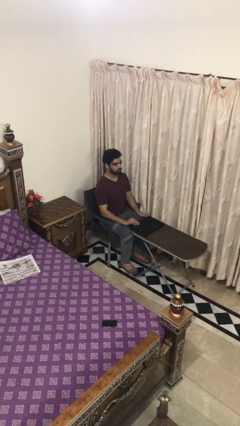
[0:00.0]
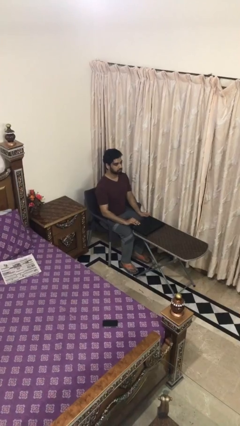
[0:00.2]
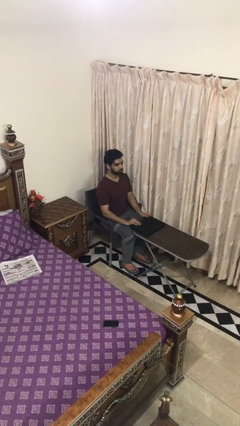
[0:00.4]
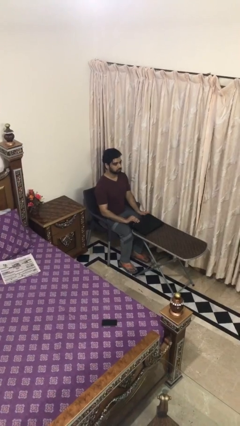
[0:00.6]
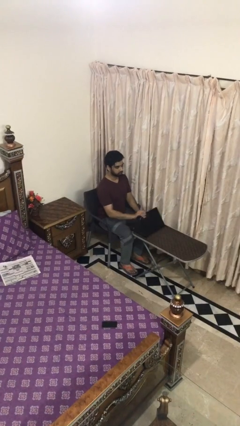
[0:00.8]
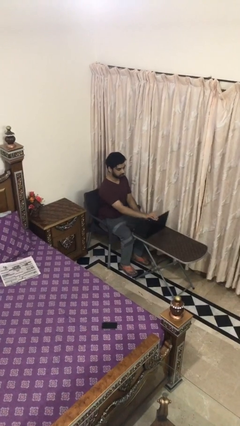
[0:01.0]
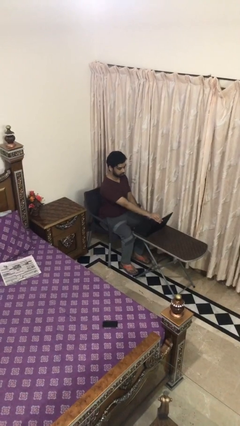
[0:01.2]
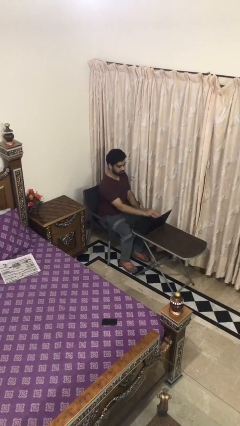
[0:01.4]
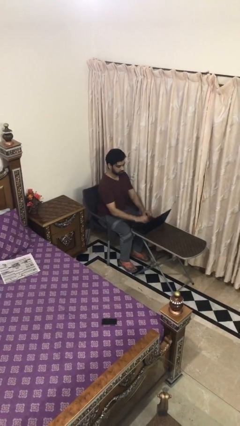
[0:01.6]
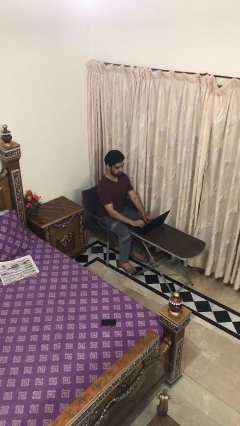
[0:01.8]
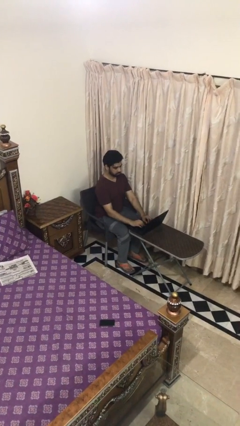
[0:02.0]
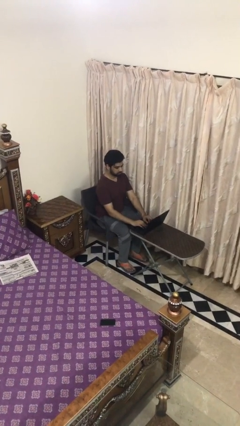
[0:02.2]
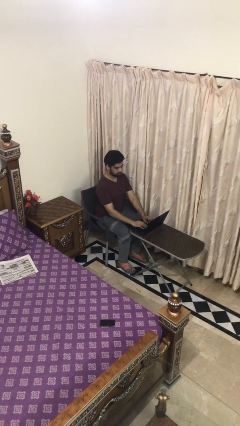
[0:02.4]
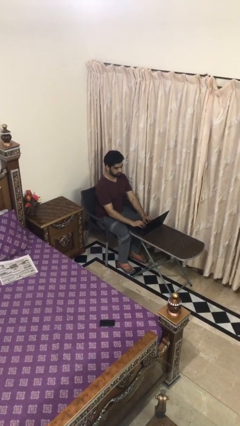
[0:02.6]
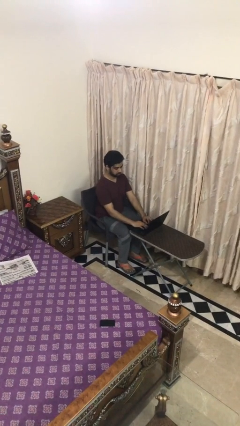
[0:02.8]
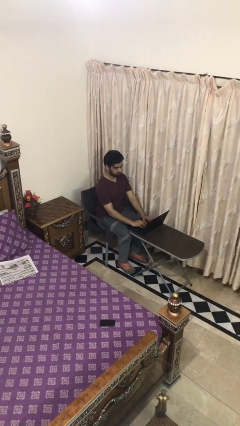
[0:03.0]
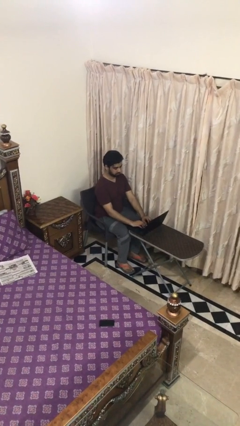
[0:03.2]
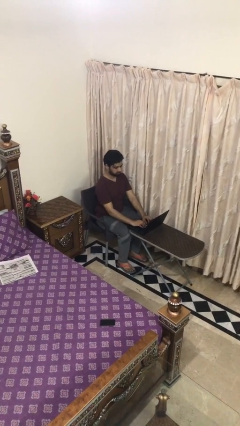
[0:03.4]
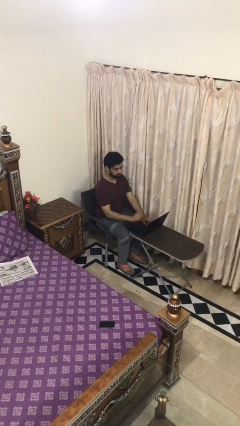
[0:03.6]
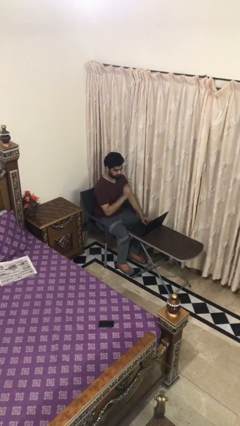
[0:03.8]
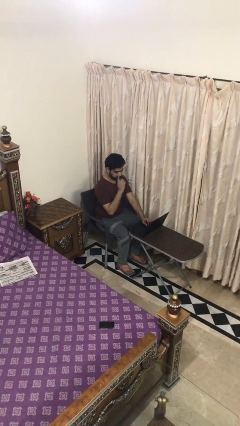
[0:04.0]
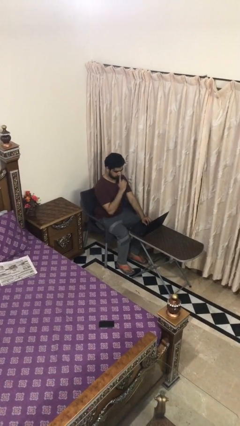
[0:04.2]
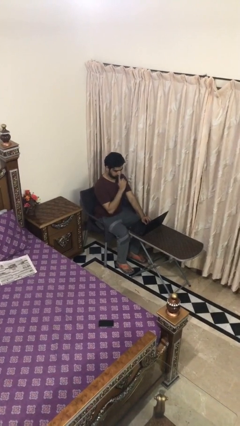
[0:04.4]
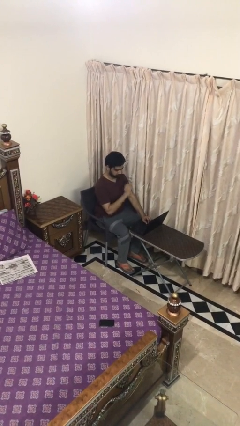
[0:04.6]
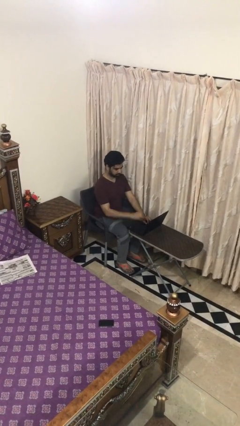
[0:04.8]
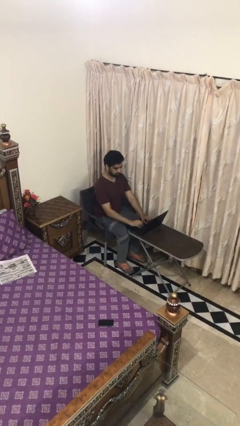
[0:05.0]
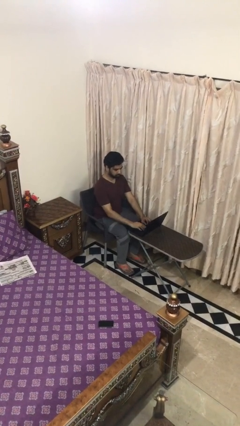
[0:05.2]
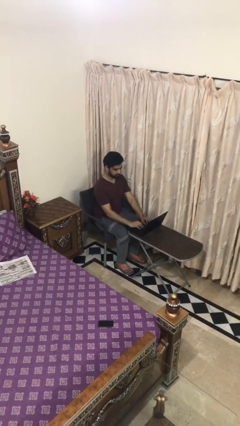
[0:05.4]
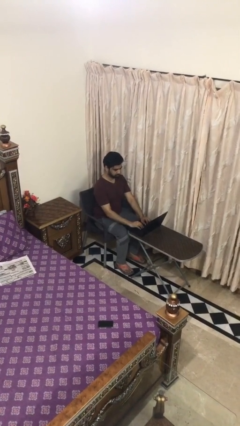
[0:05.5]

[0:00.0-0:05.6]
person interacts with laptop

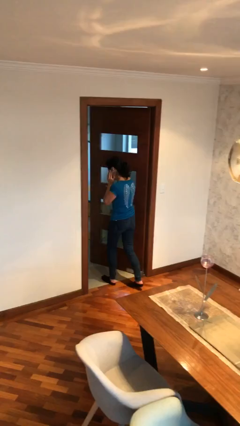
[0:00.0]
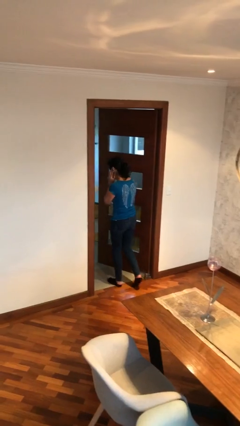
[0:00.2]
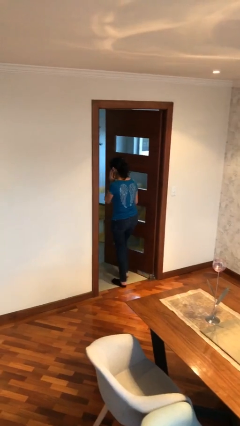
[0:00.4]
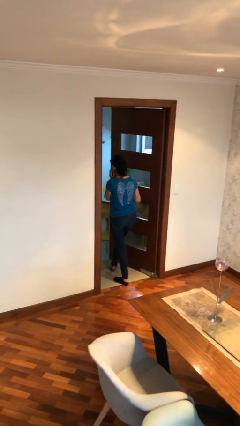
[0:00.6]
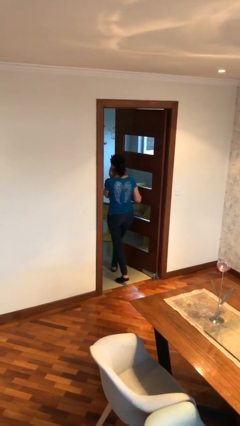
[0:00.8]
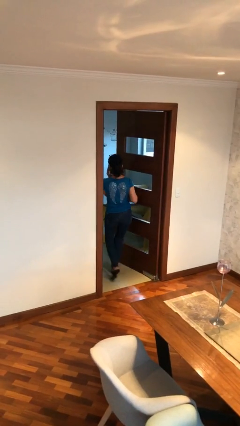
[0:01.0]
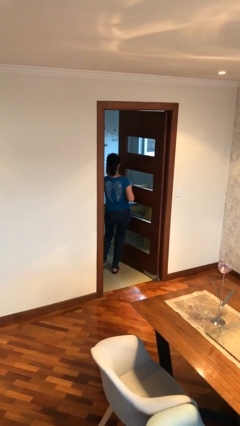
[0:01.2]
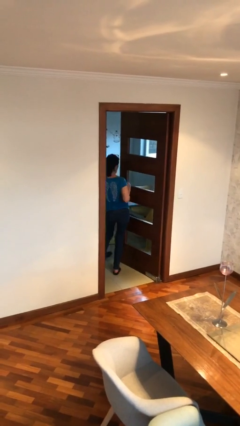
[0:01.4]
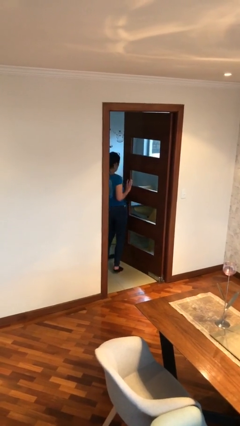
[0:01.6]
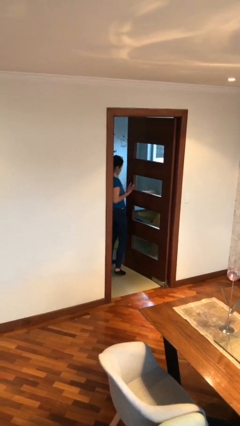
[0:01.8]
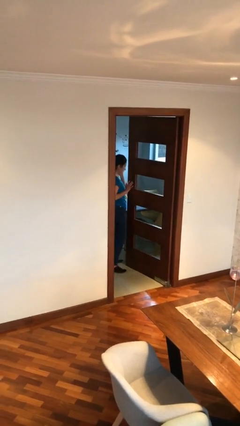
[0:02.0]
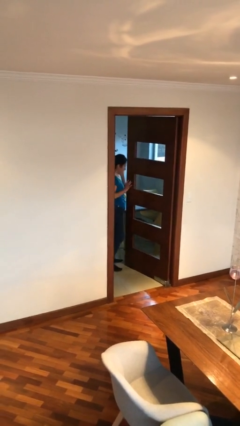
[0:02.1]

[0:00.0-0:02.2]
person exits scene through structure

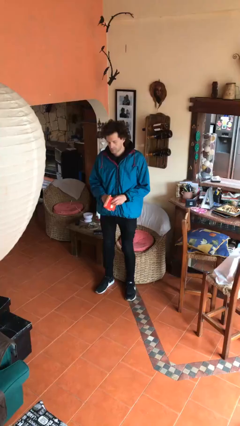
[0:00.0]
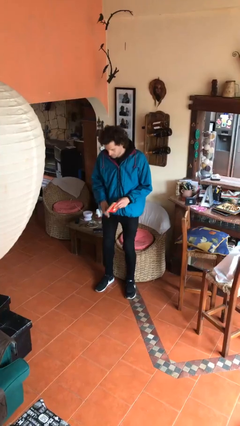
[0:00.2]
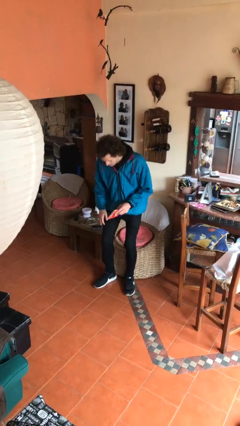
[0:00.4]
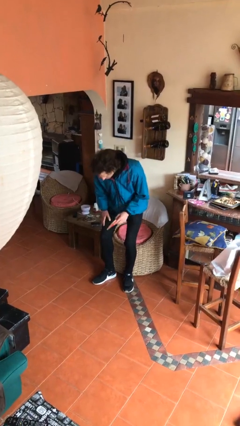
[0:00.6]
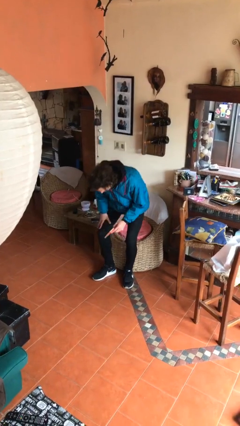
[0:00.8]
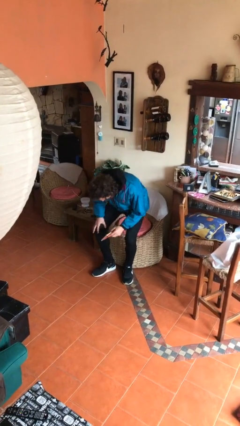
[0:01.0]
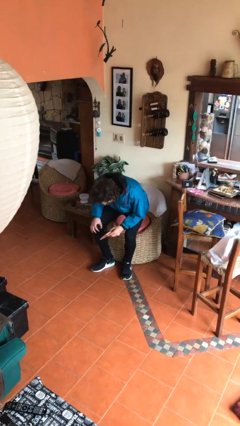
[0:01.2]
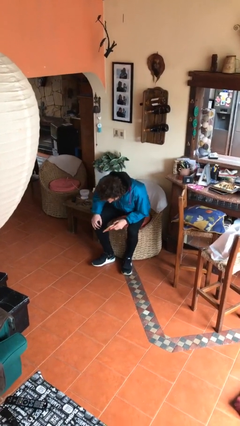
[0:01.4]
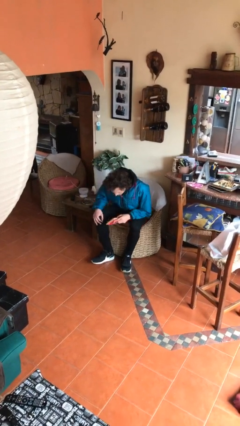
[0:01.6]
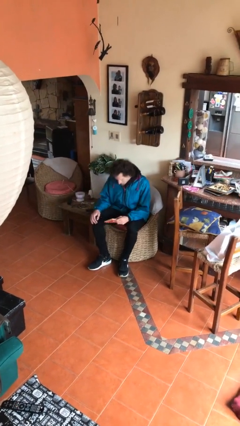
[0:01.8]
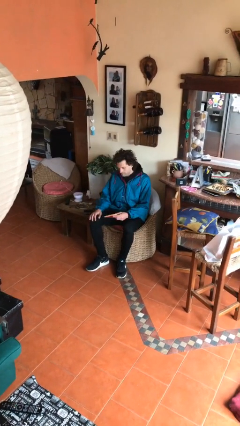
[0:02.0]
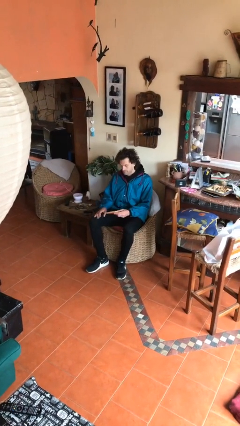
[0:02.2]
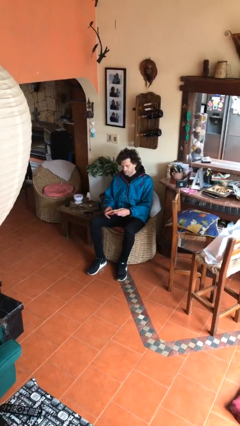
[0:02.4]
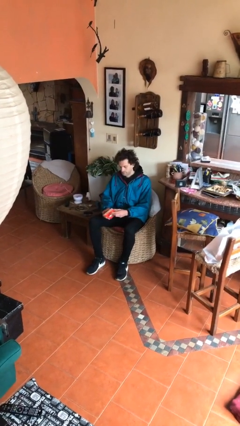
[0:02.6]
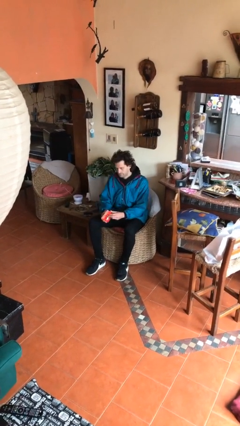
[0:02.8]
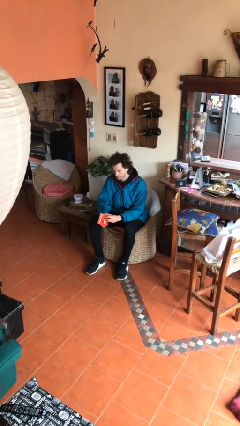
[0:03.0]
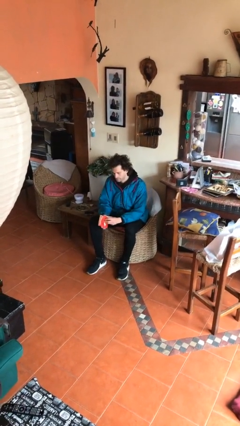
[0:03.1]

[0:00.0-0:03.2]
person sits down

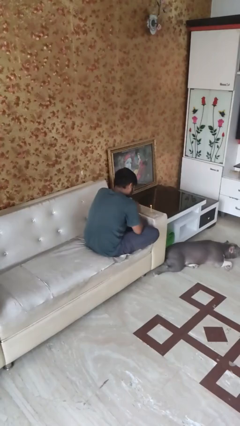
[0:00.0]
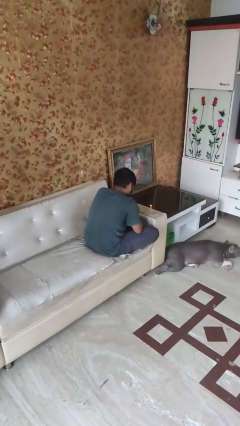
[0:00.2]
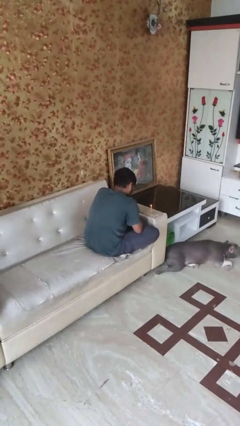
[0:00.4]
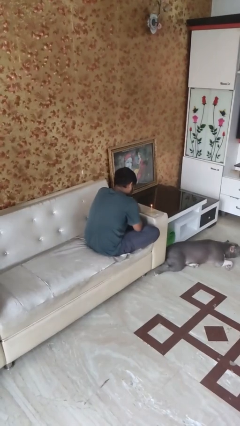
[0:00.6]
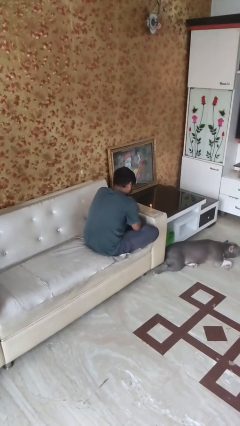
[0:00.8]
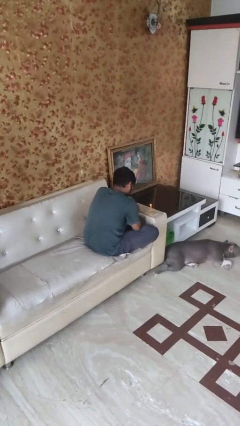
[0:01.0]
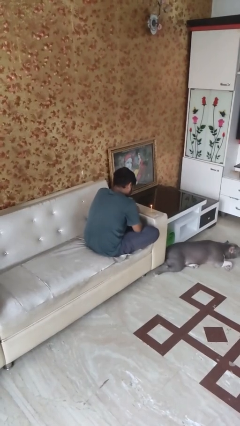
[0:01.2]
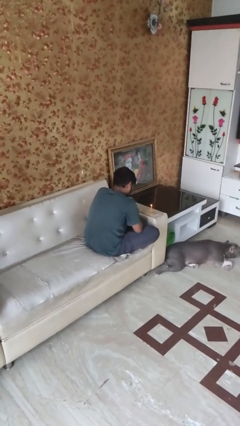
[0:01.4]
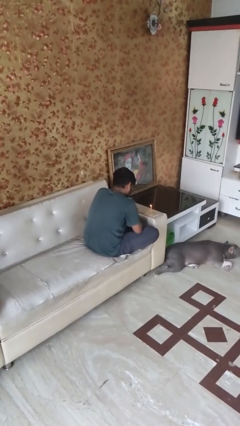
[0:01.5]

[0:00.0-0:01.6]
person lights candle

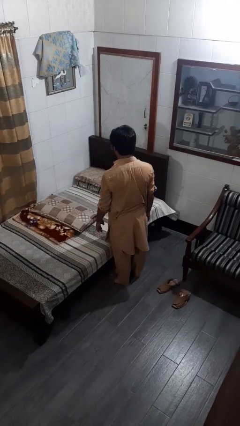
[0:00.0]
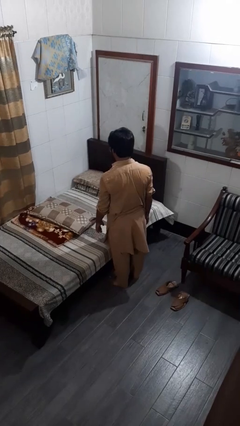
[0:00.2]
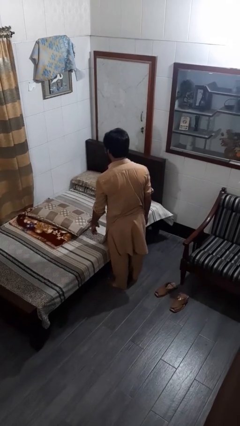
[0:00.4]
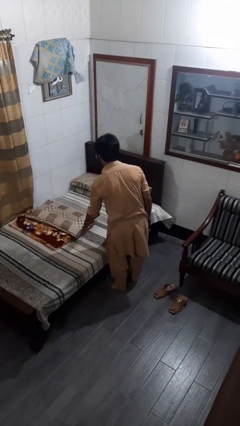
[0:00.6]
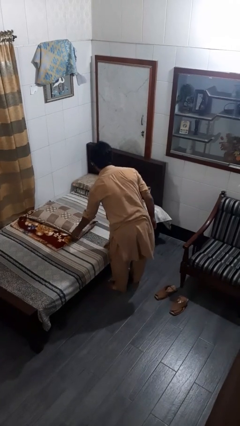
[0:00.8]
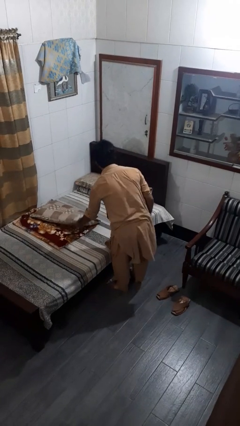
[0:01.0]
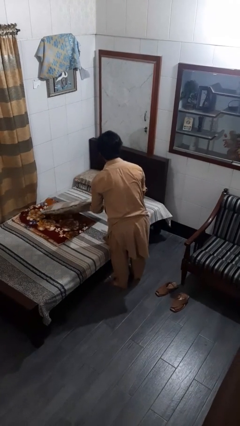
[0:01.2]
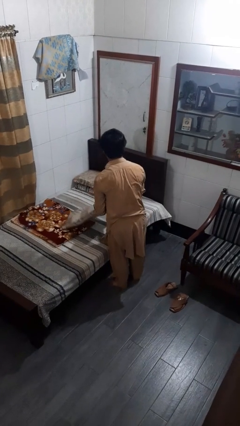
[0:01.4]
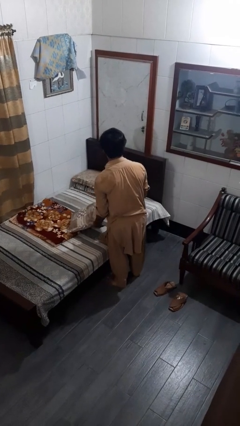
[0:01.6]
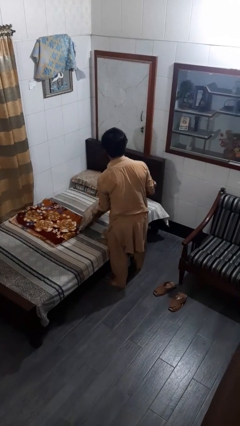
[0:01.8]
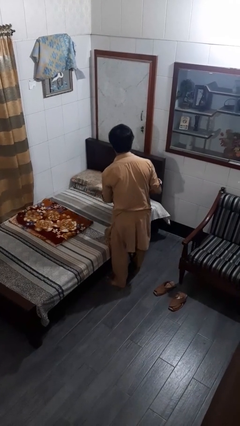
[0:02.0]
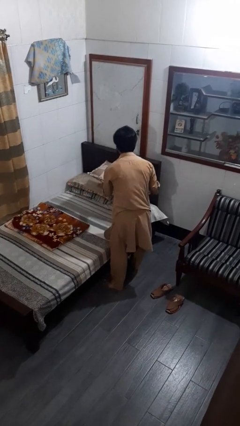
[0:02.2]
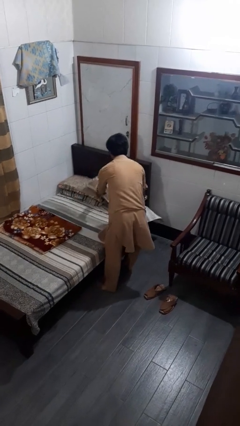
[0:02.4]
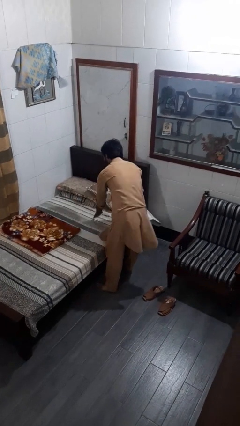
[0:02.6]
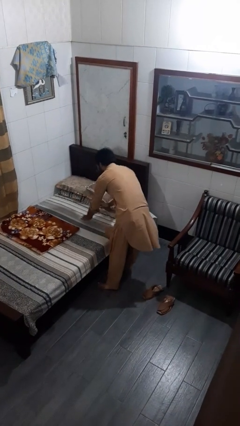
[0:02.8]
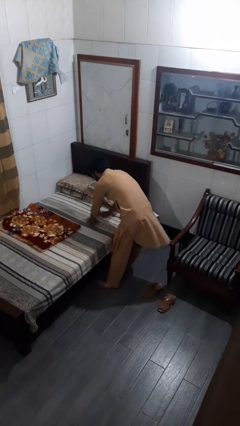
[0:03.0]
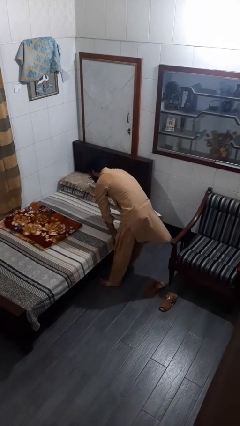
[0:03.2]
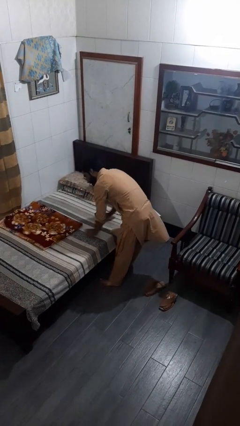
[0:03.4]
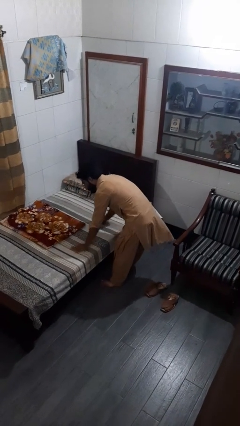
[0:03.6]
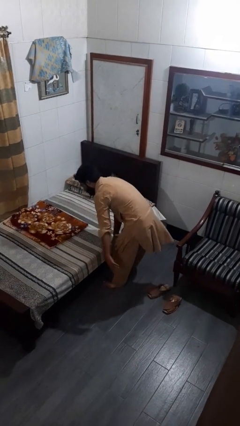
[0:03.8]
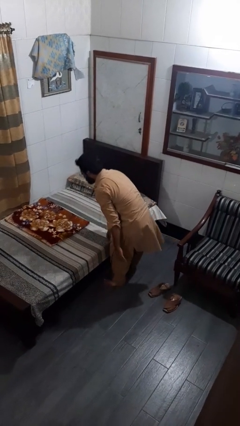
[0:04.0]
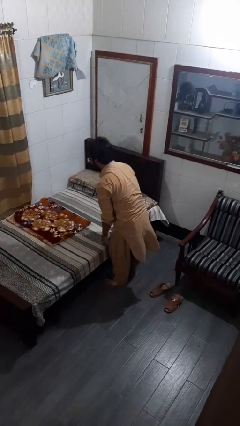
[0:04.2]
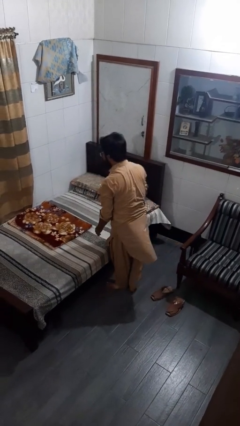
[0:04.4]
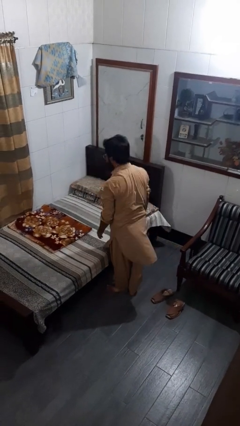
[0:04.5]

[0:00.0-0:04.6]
person makes bed

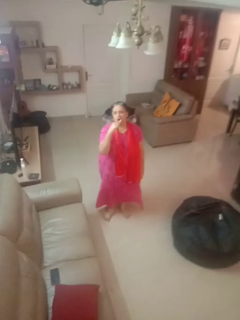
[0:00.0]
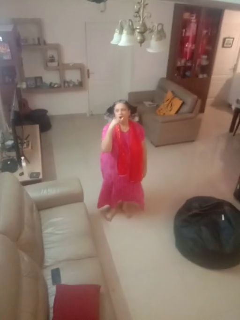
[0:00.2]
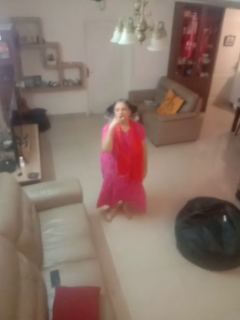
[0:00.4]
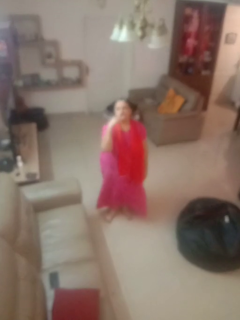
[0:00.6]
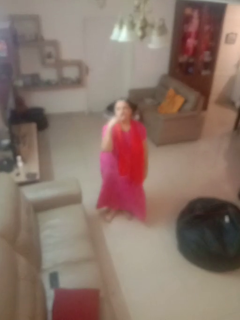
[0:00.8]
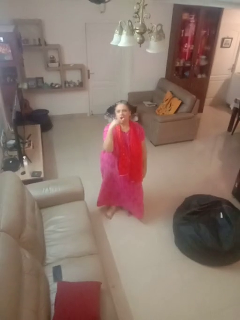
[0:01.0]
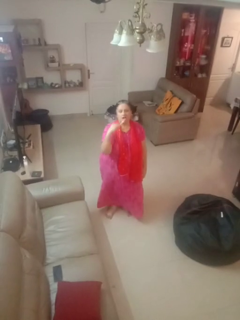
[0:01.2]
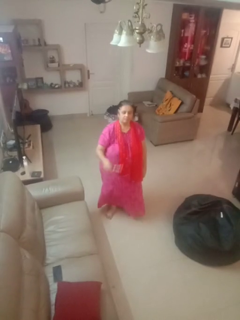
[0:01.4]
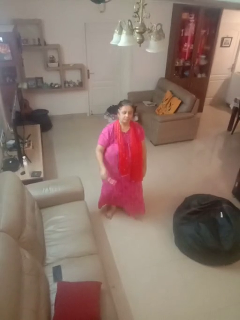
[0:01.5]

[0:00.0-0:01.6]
person brushes teeth
